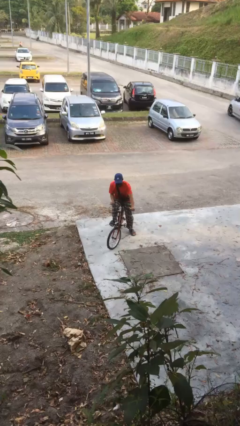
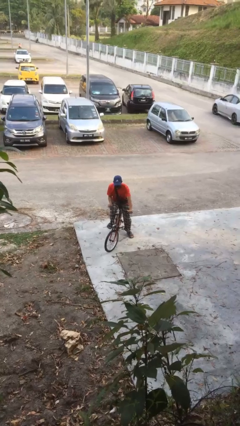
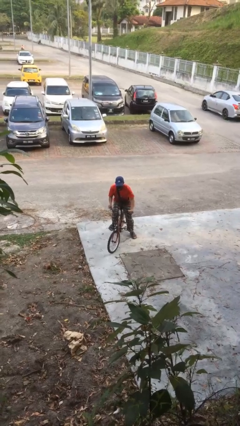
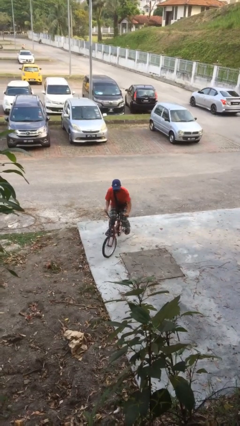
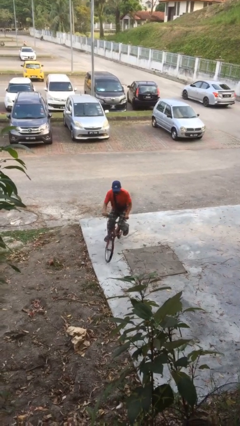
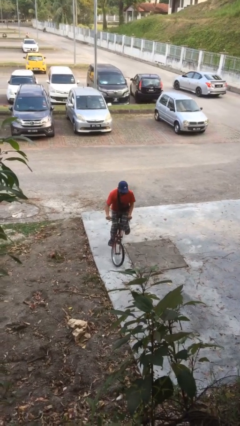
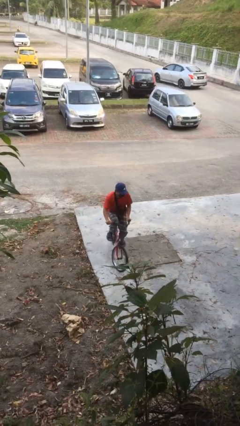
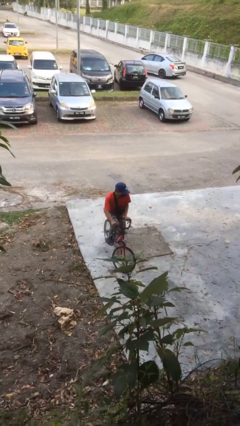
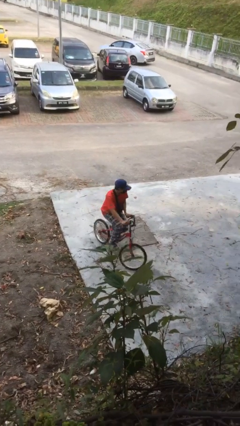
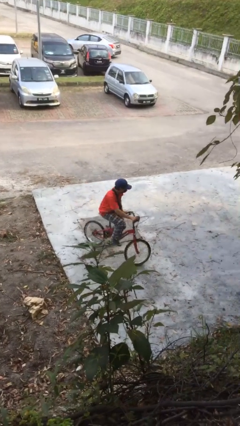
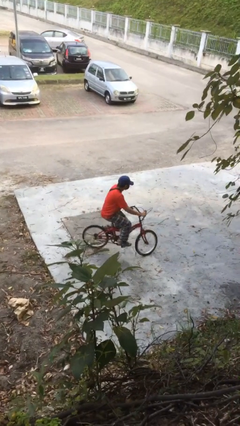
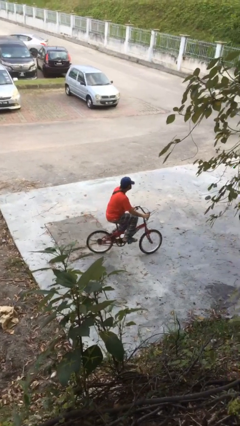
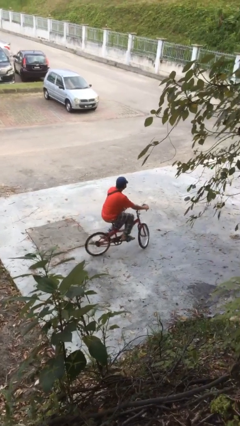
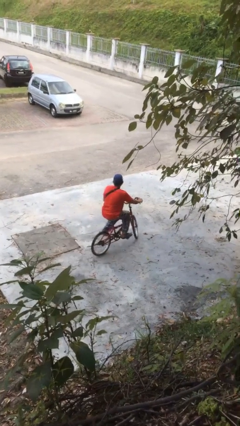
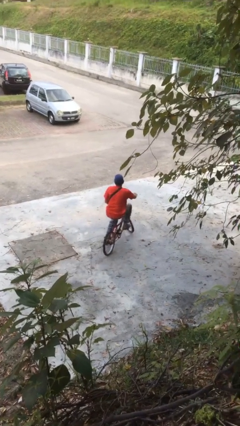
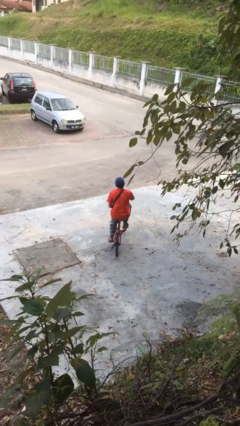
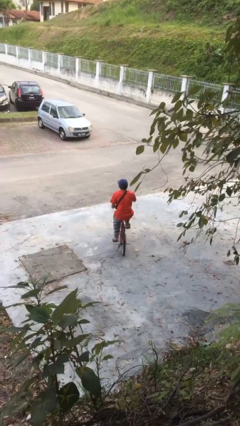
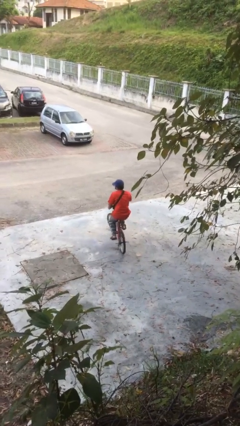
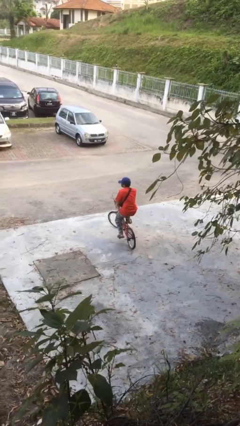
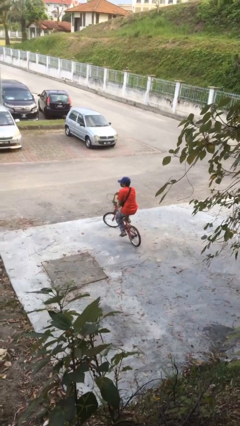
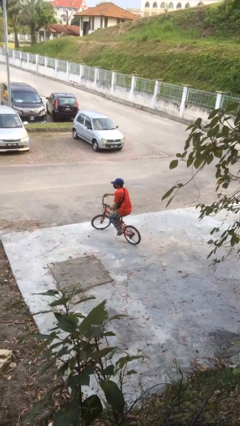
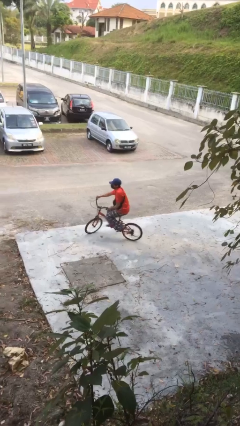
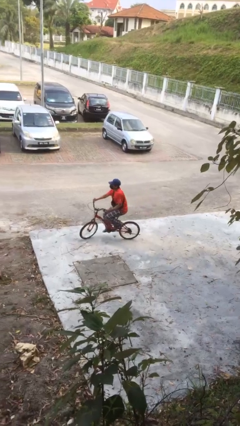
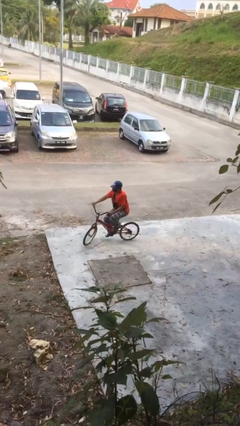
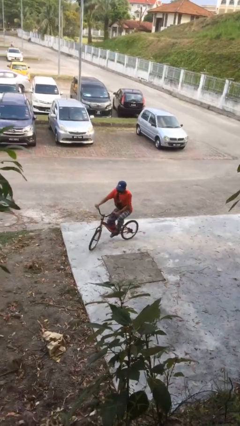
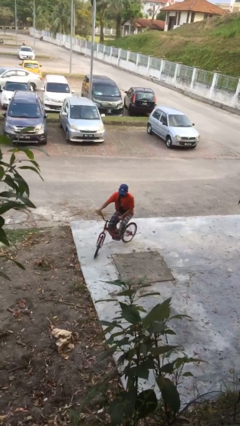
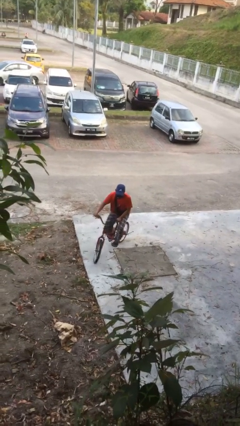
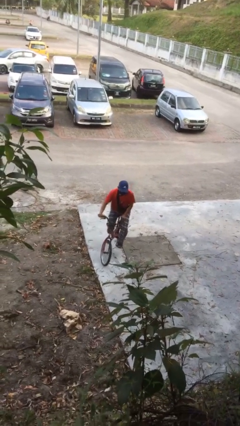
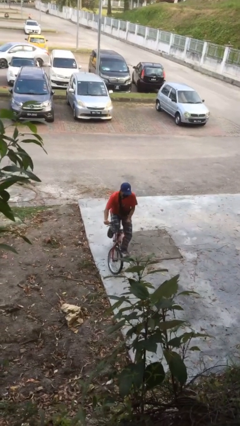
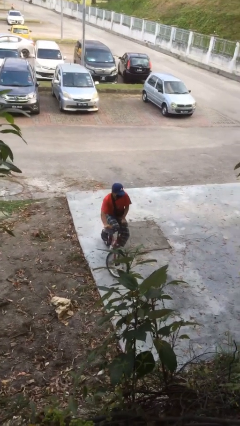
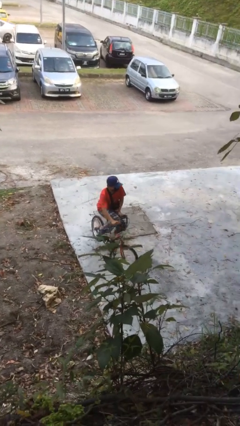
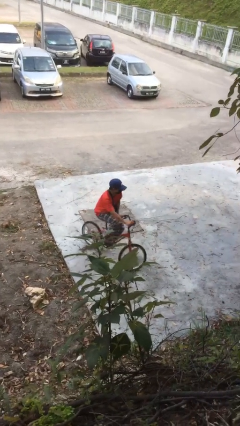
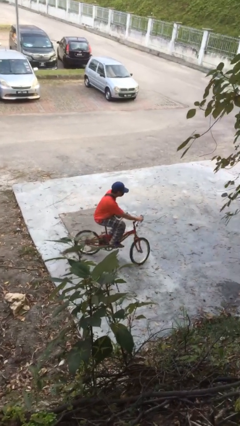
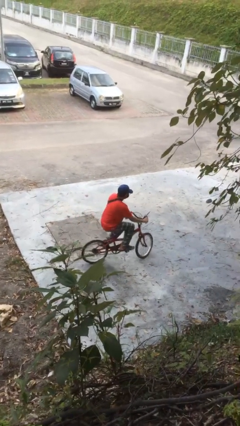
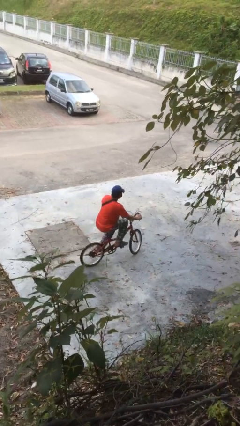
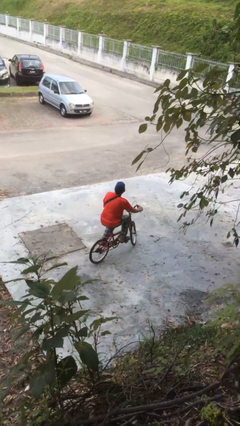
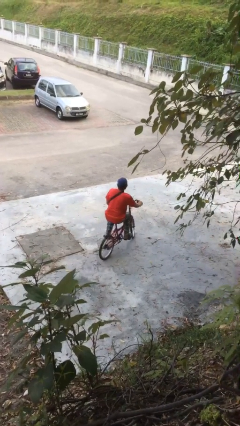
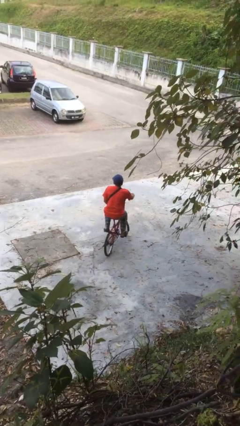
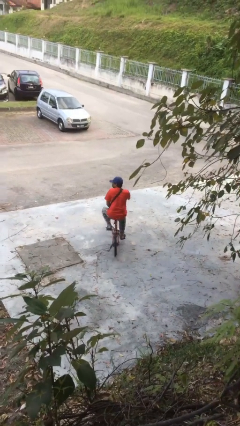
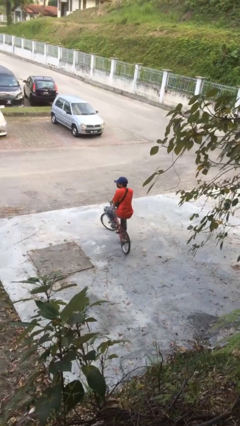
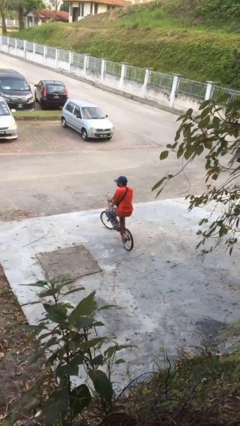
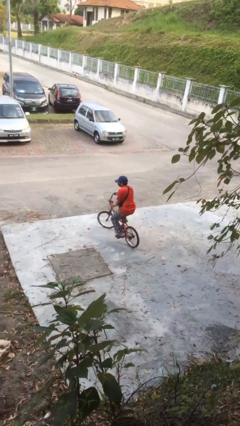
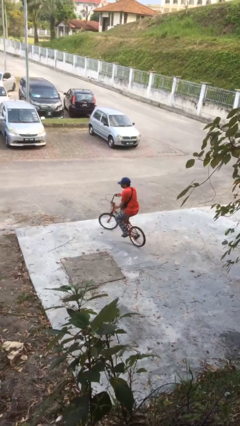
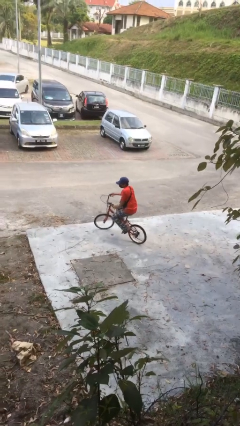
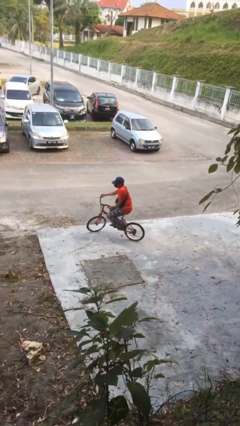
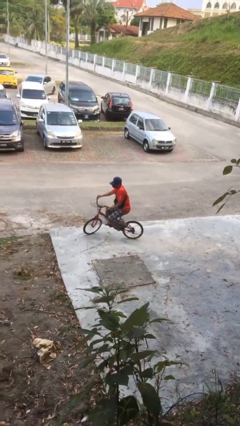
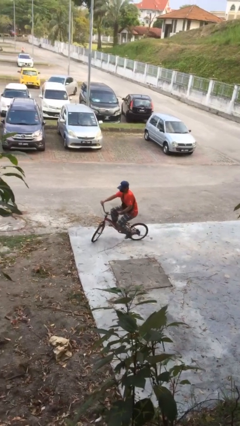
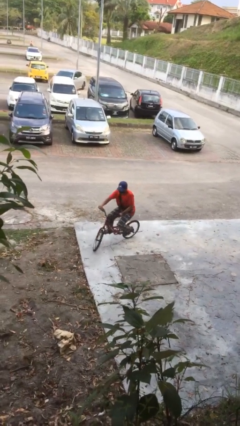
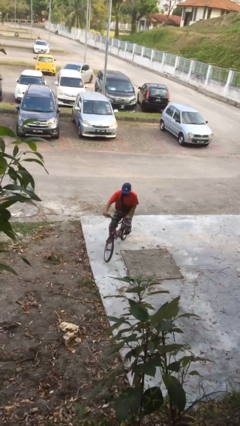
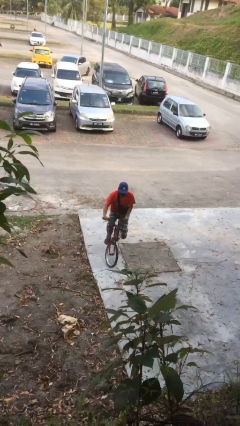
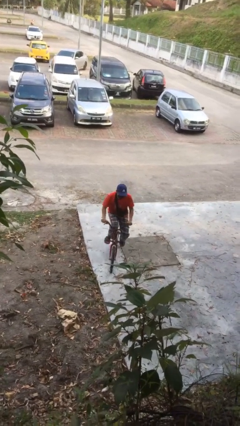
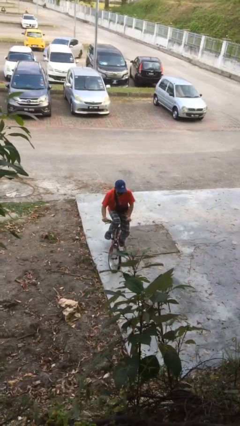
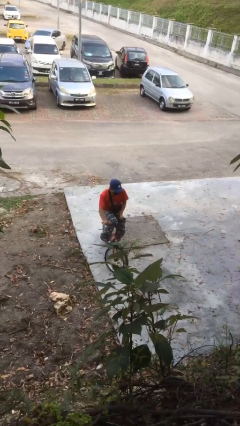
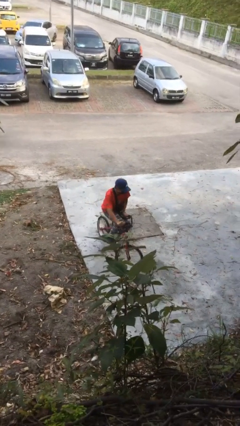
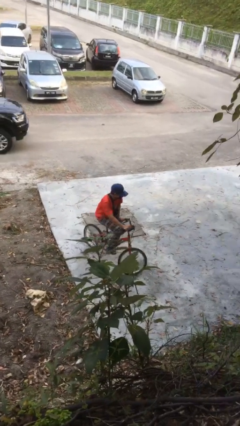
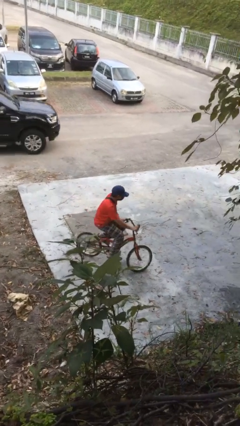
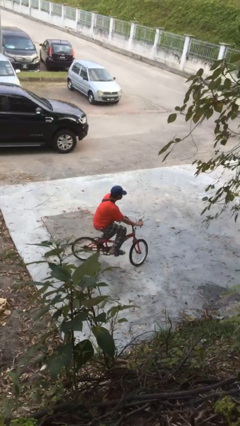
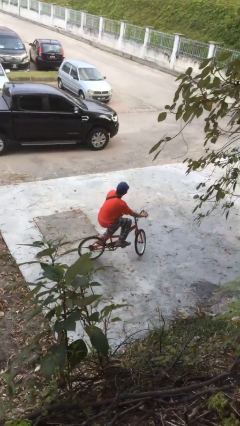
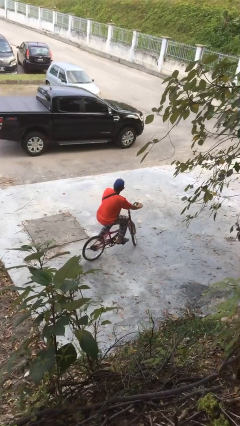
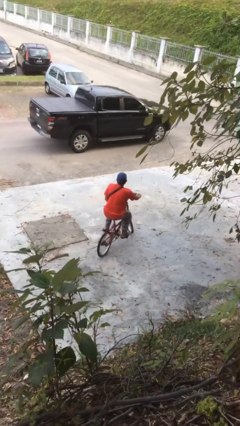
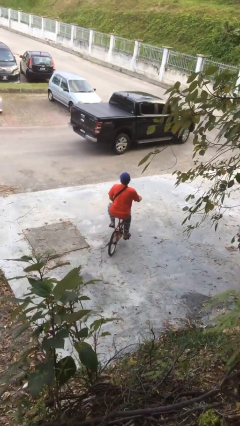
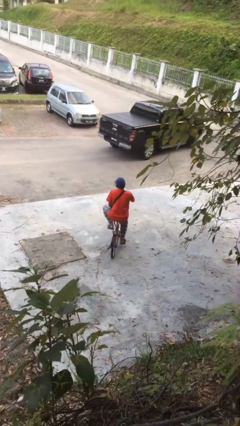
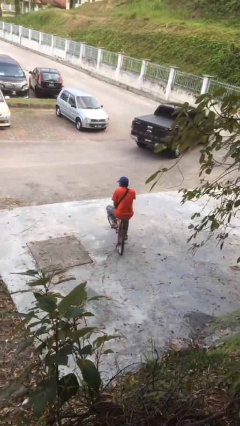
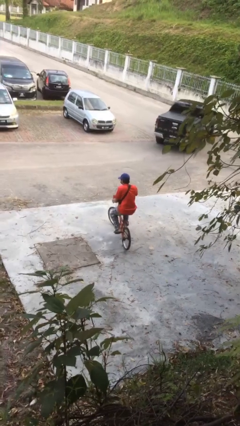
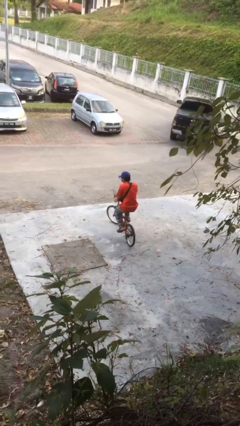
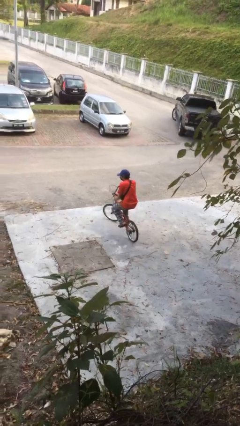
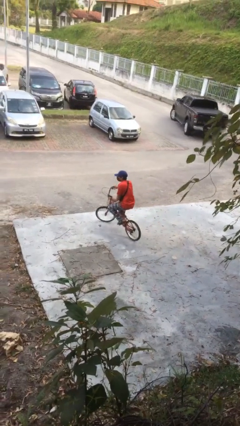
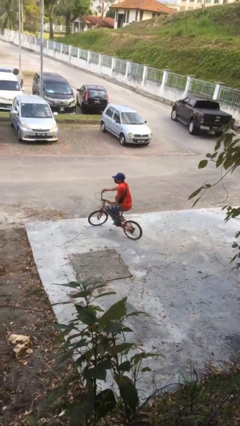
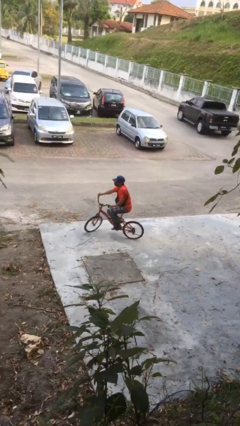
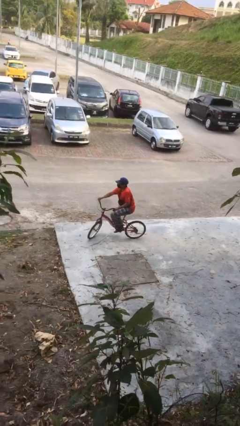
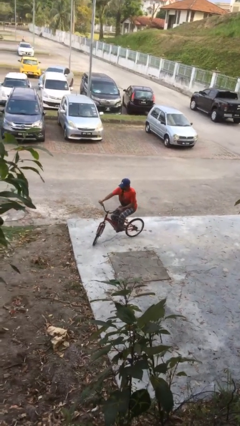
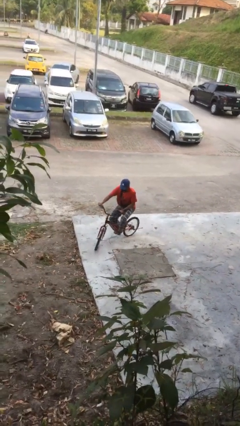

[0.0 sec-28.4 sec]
person rides bicycle

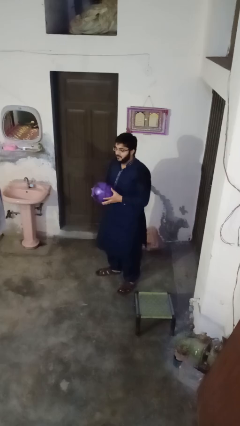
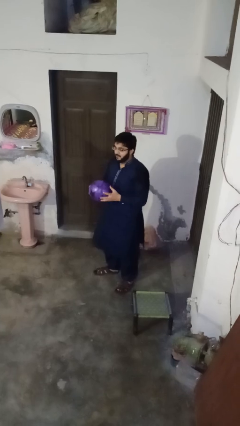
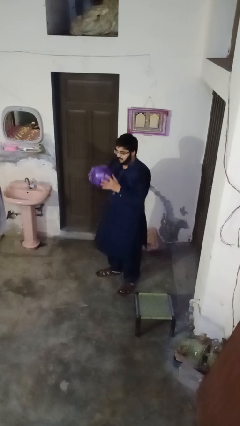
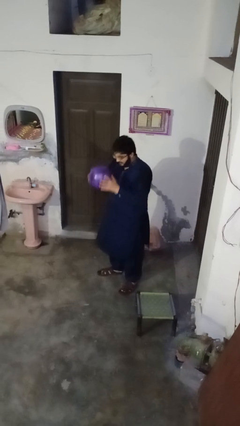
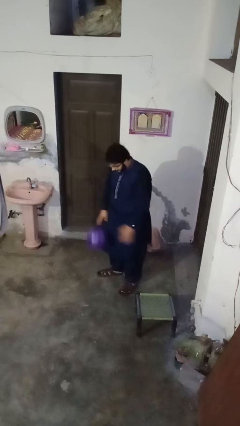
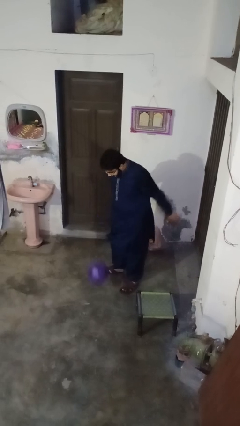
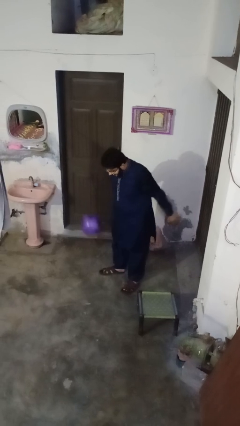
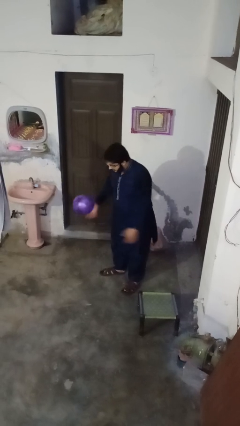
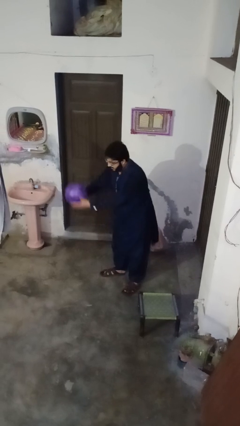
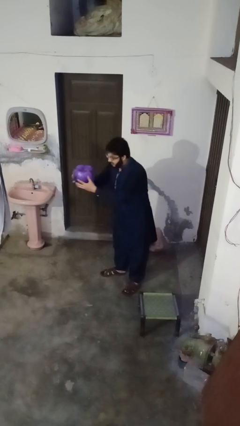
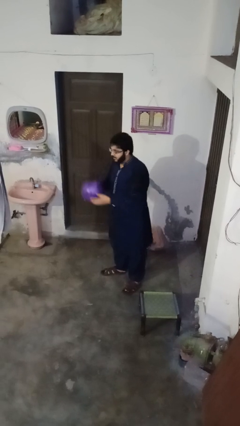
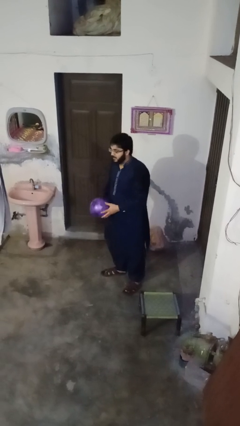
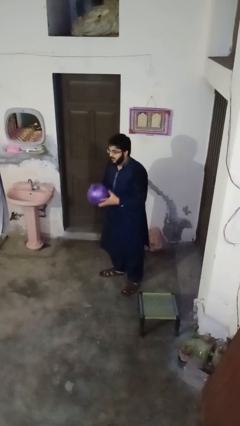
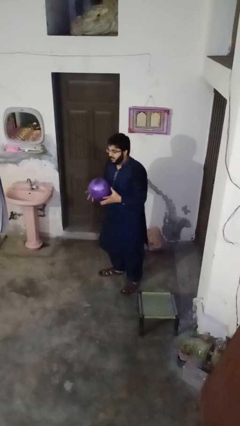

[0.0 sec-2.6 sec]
person bounces ball on floor

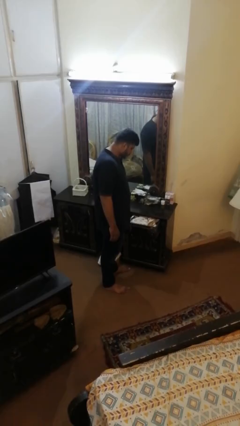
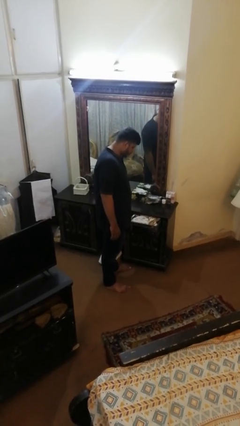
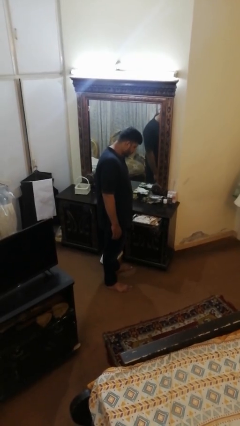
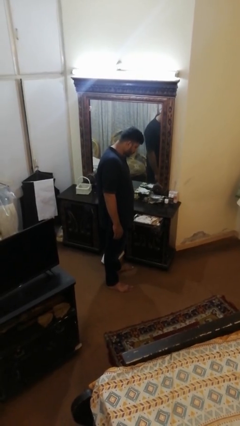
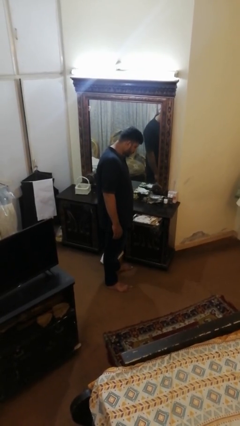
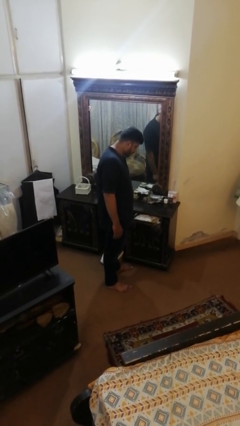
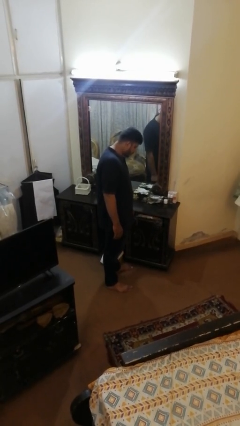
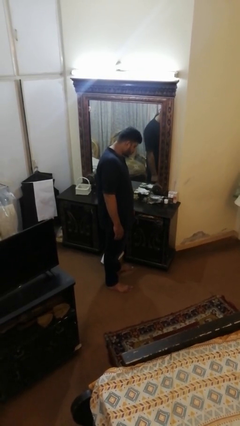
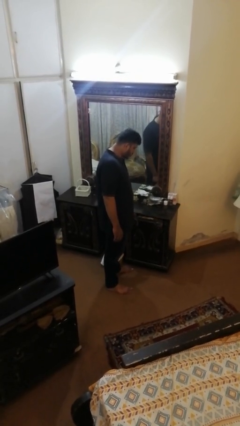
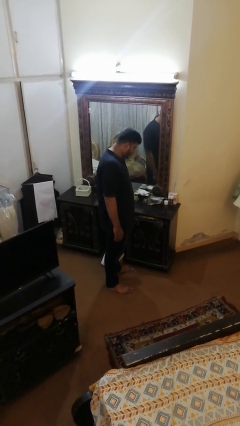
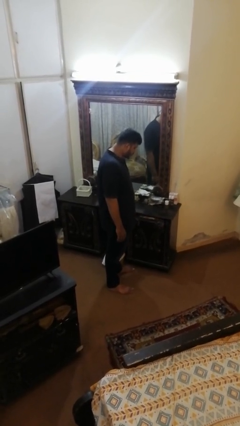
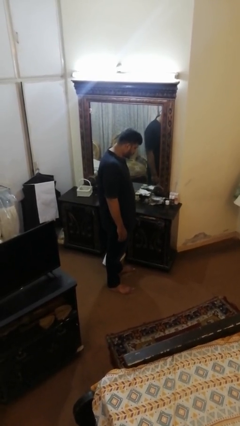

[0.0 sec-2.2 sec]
person closes dresser drawer
